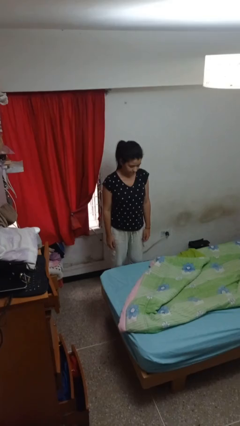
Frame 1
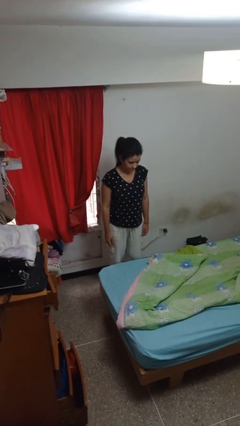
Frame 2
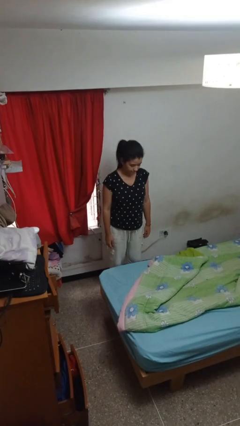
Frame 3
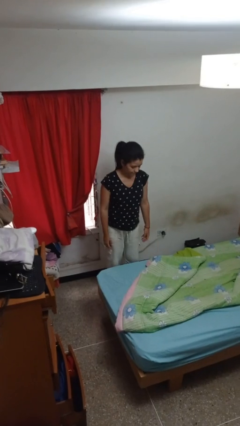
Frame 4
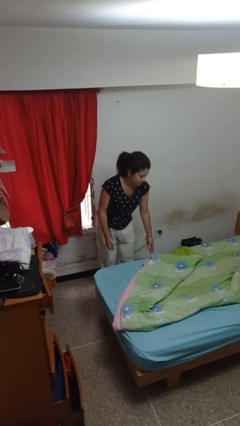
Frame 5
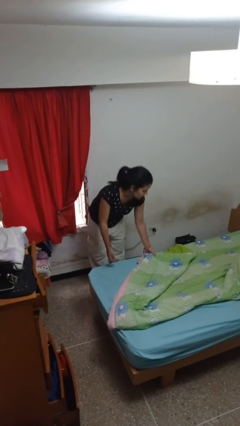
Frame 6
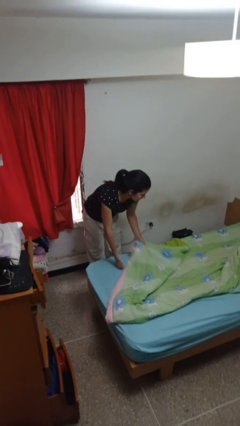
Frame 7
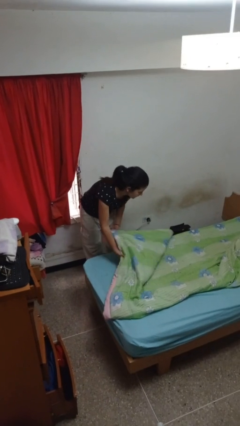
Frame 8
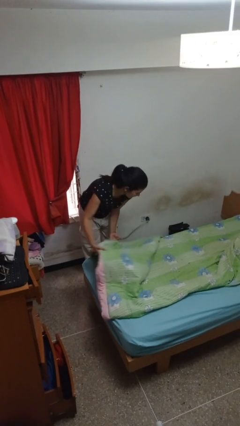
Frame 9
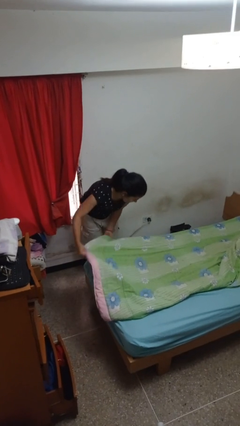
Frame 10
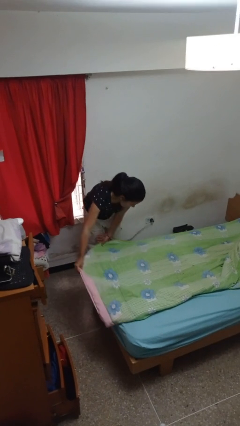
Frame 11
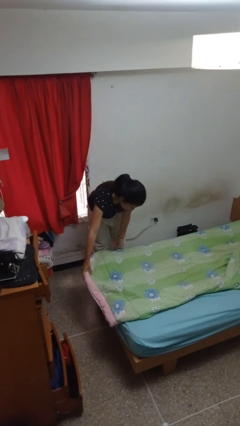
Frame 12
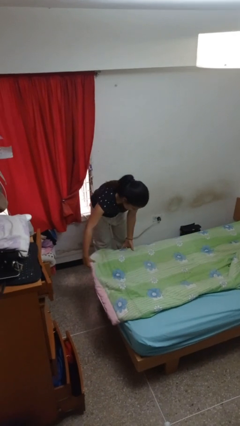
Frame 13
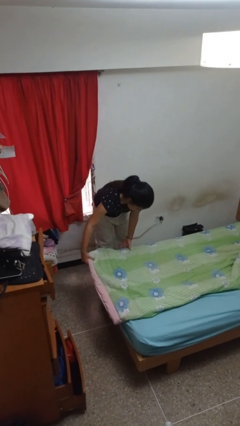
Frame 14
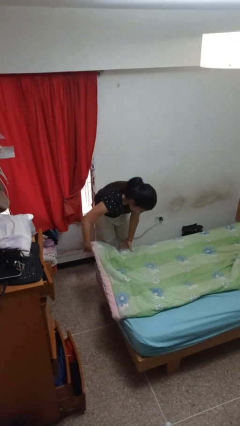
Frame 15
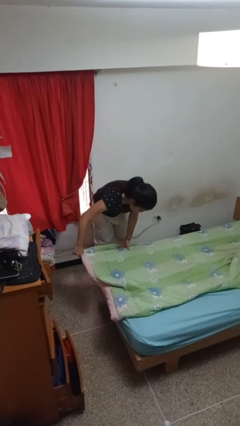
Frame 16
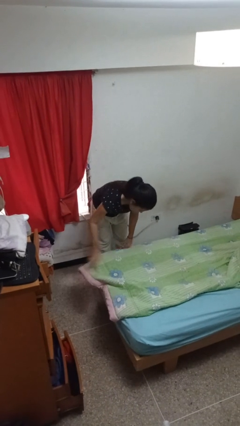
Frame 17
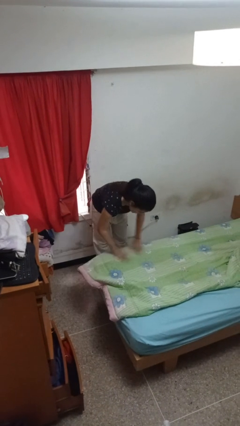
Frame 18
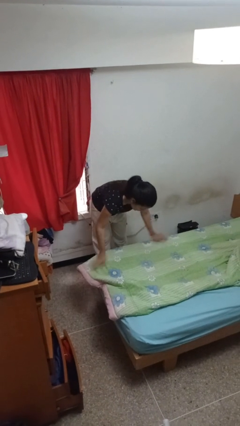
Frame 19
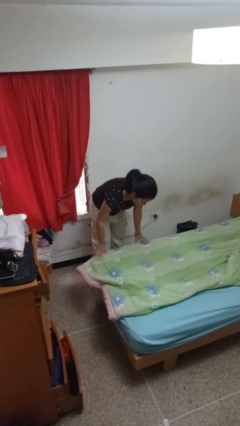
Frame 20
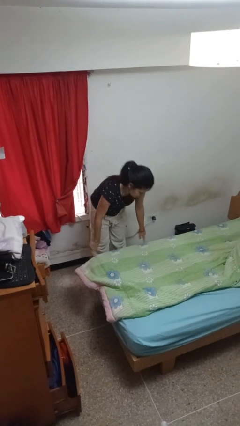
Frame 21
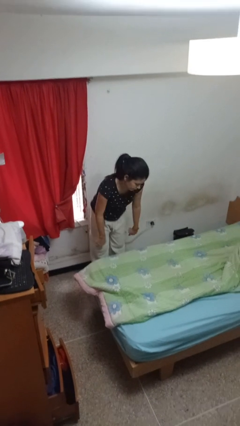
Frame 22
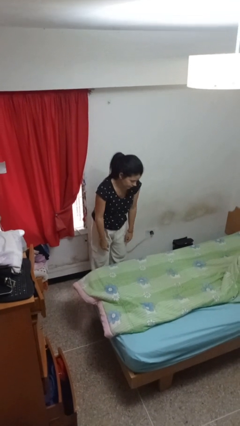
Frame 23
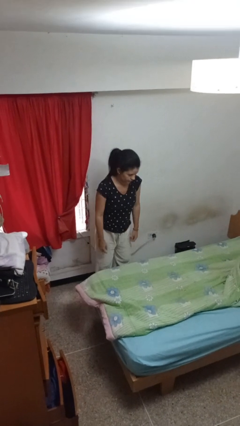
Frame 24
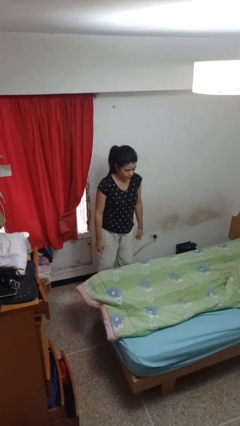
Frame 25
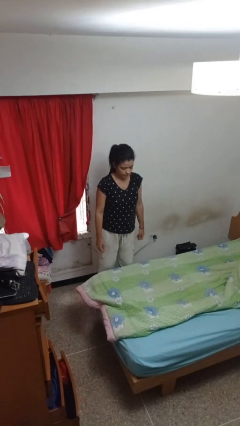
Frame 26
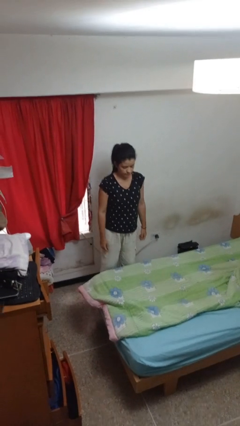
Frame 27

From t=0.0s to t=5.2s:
person makes bed

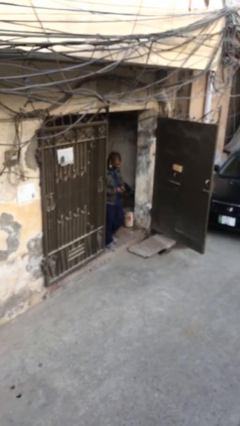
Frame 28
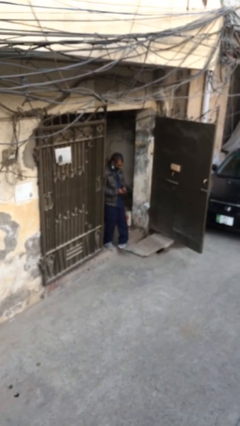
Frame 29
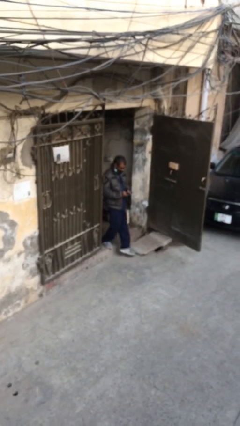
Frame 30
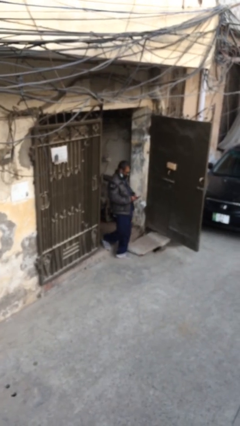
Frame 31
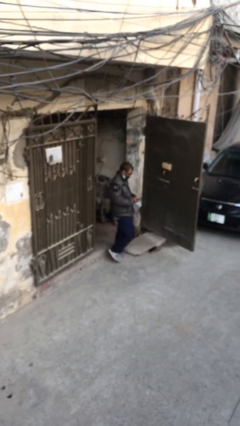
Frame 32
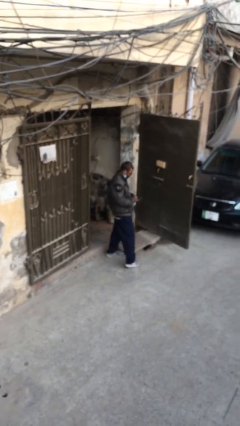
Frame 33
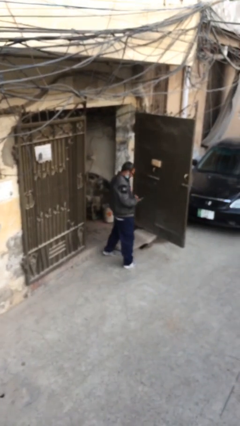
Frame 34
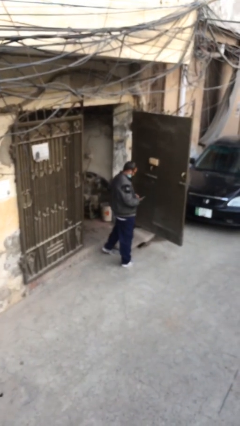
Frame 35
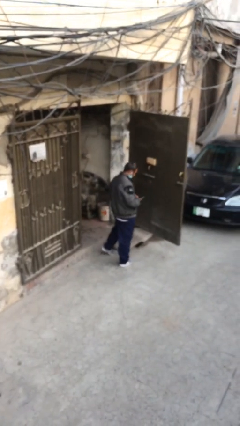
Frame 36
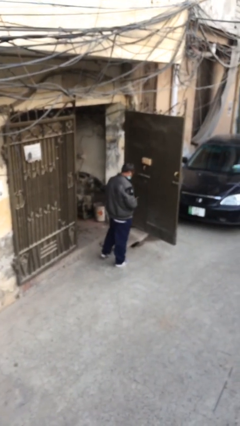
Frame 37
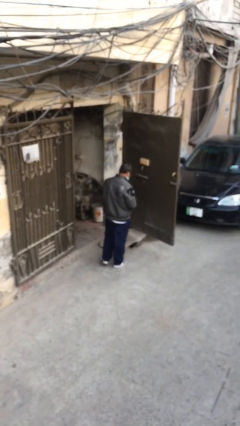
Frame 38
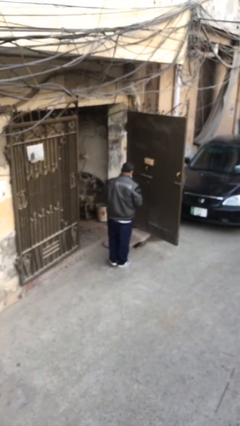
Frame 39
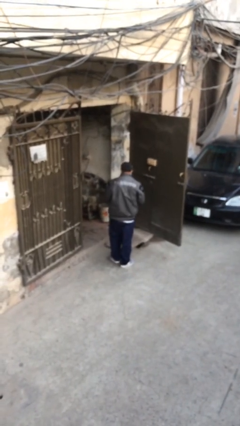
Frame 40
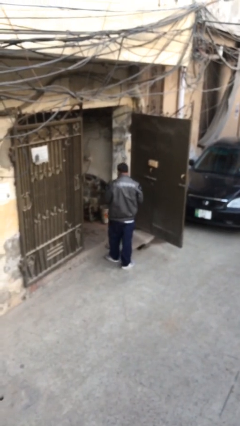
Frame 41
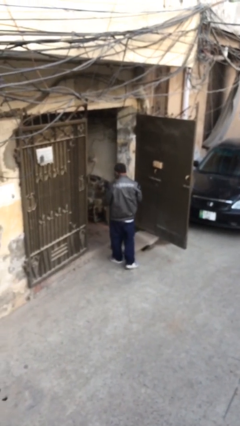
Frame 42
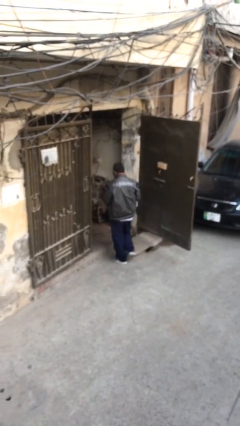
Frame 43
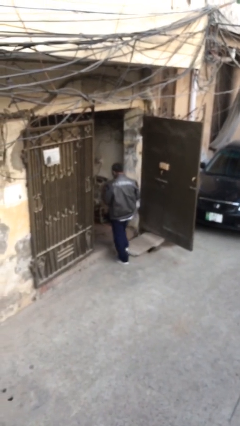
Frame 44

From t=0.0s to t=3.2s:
person enters scene through structure

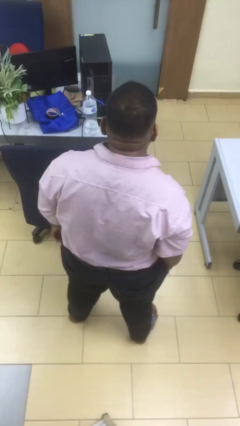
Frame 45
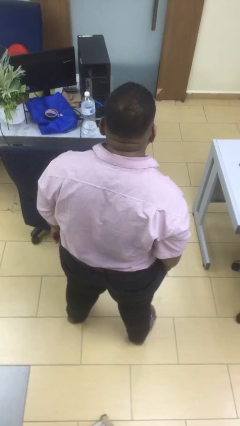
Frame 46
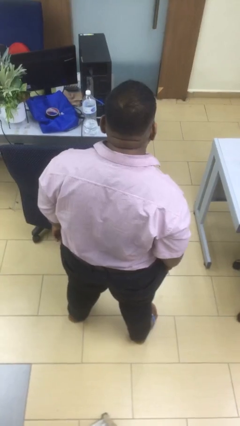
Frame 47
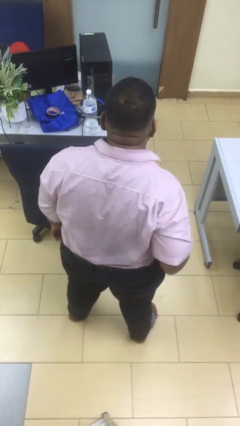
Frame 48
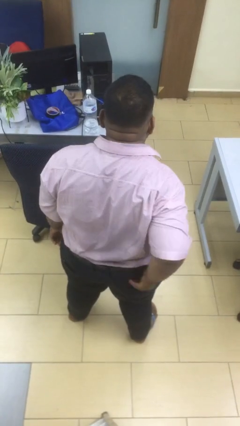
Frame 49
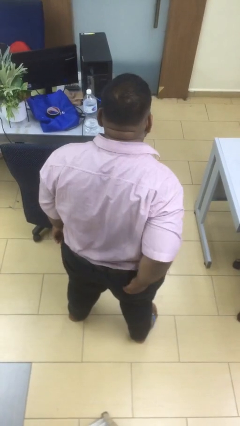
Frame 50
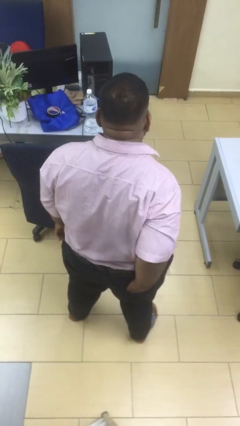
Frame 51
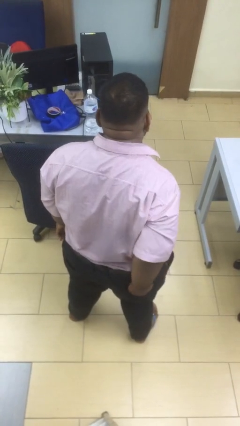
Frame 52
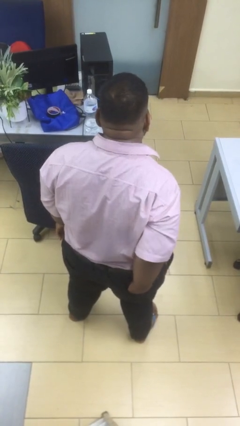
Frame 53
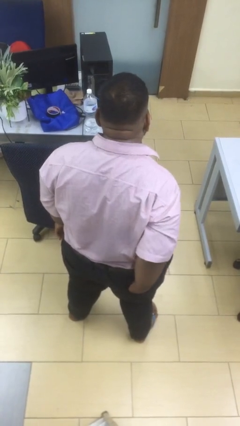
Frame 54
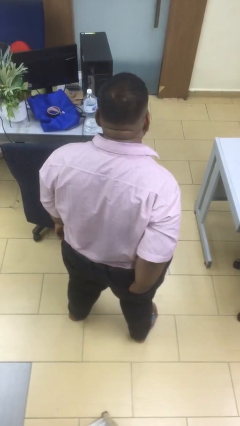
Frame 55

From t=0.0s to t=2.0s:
person puts hands in back pockets

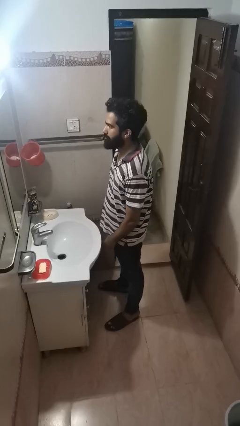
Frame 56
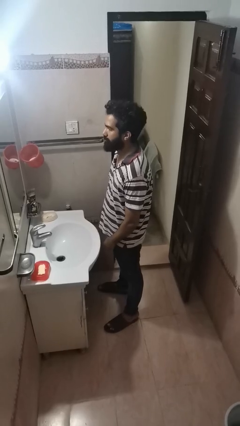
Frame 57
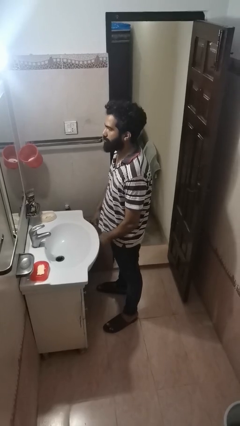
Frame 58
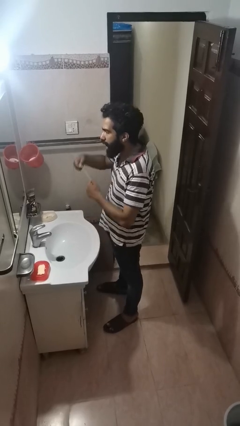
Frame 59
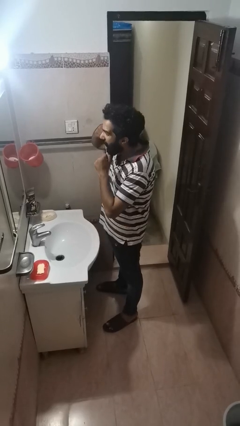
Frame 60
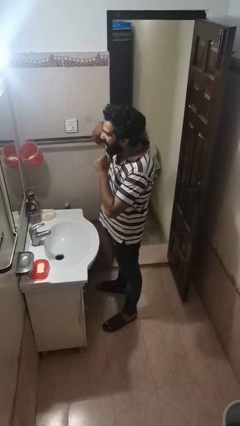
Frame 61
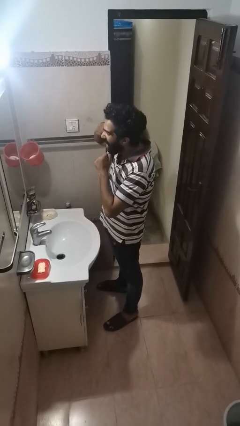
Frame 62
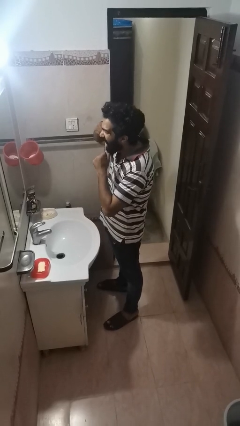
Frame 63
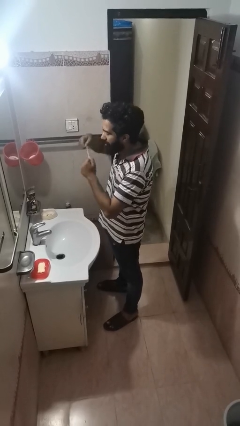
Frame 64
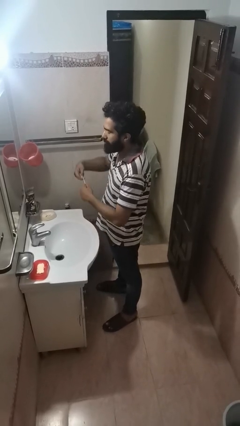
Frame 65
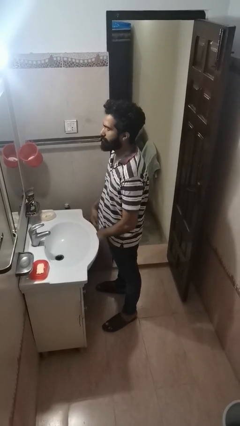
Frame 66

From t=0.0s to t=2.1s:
person flosses

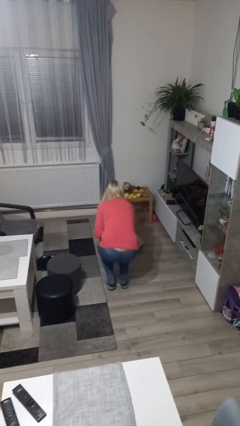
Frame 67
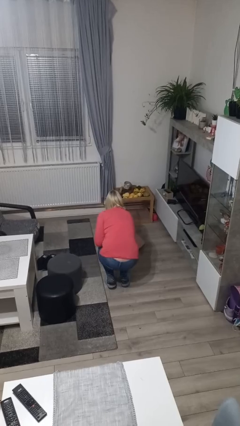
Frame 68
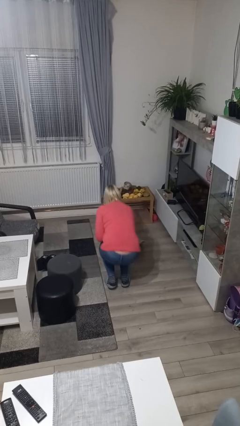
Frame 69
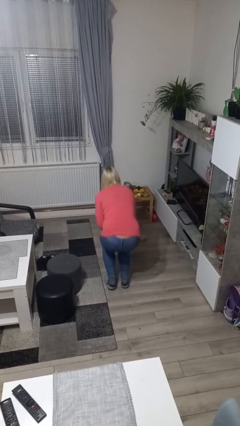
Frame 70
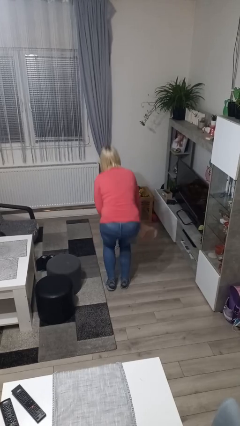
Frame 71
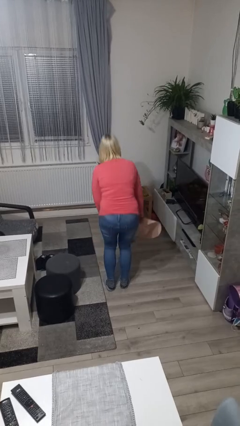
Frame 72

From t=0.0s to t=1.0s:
person picks up object from floor

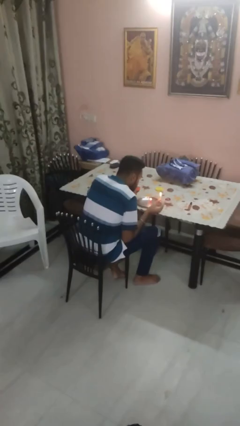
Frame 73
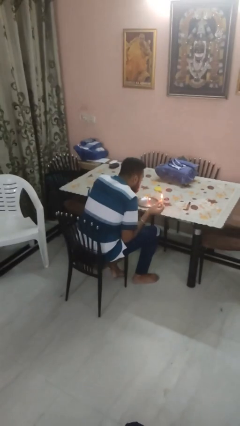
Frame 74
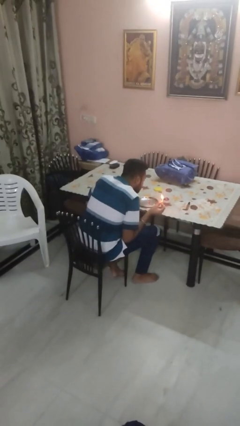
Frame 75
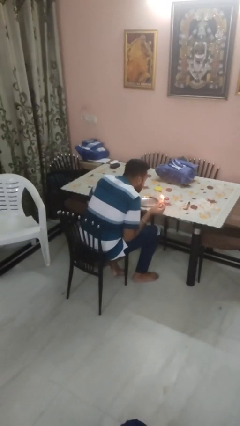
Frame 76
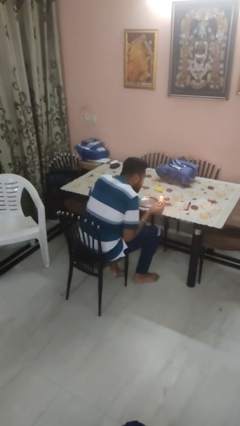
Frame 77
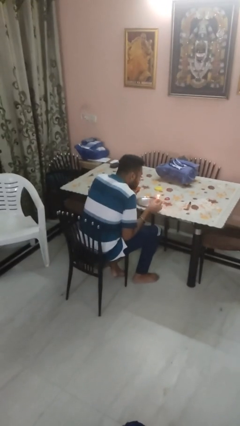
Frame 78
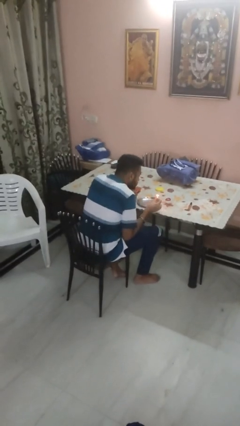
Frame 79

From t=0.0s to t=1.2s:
person extinguishes candle

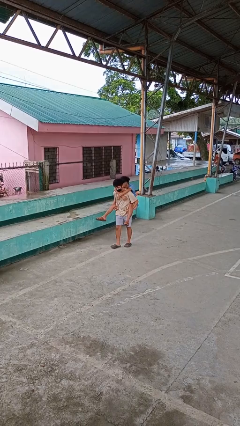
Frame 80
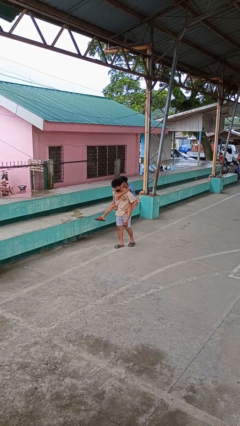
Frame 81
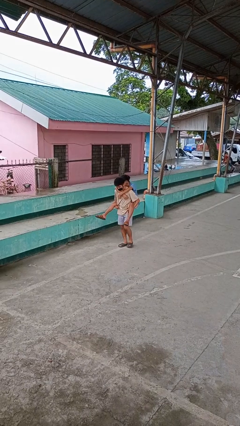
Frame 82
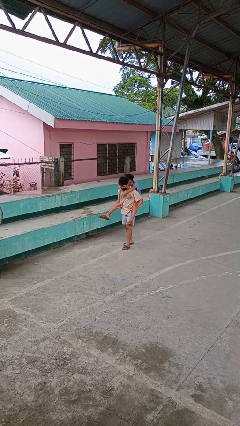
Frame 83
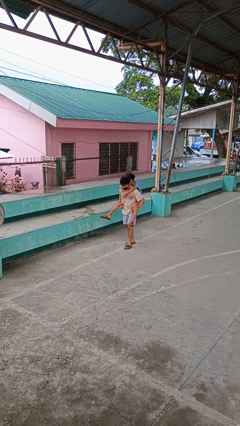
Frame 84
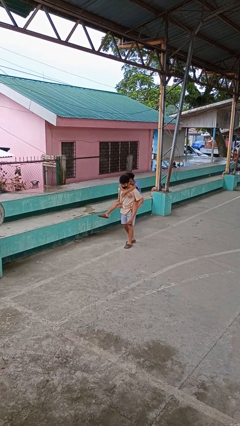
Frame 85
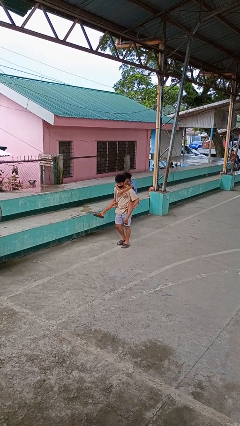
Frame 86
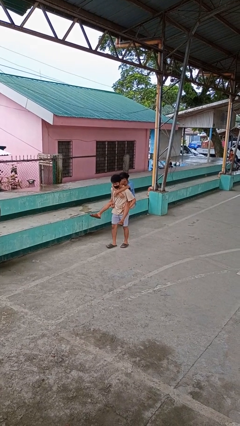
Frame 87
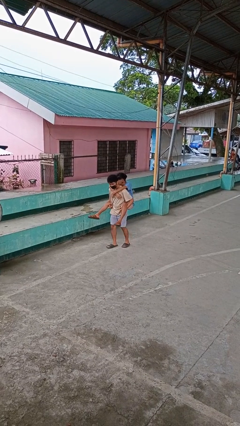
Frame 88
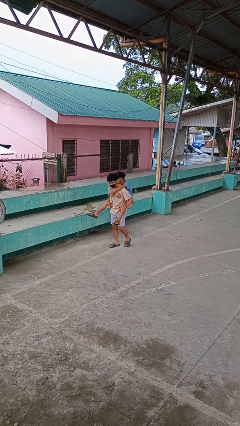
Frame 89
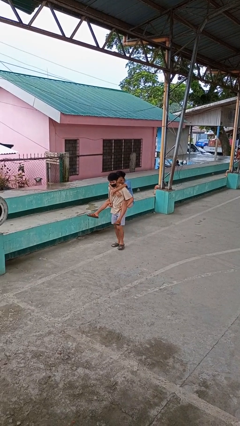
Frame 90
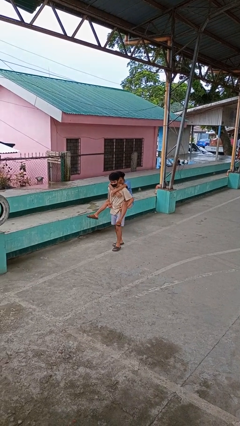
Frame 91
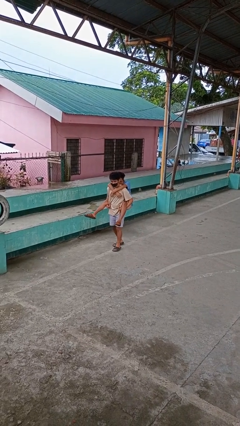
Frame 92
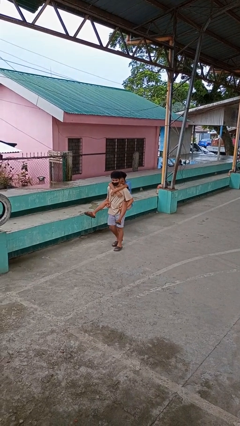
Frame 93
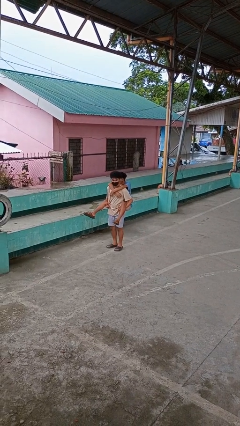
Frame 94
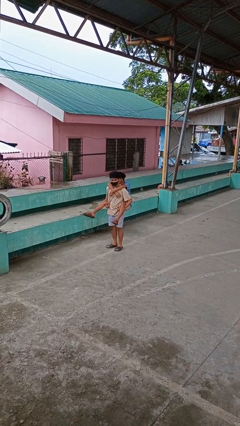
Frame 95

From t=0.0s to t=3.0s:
person carries person on back
